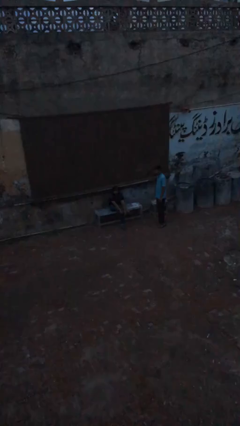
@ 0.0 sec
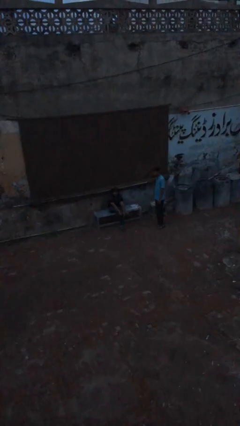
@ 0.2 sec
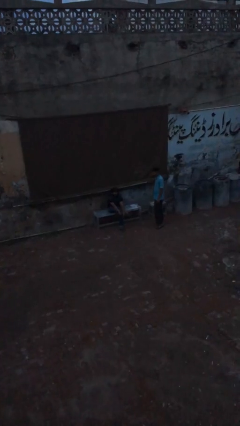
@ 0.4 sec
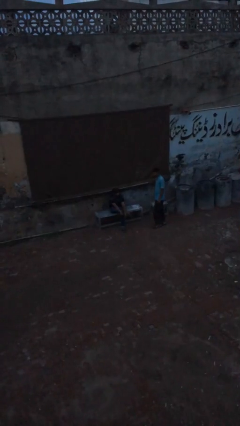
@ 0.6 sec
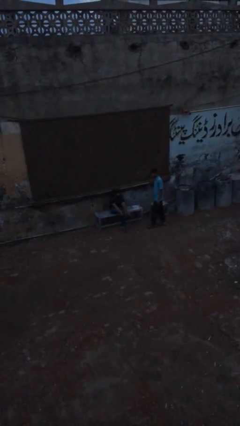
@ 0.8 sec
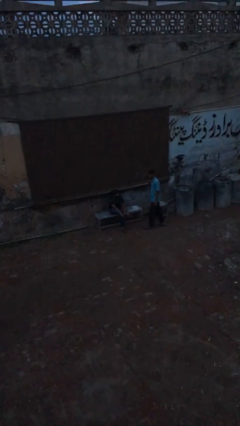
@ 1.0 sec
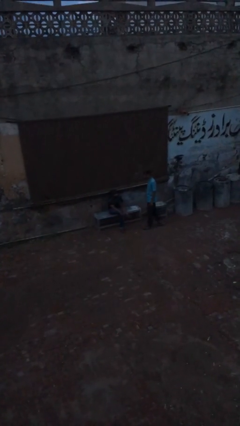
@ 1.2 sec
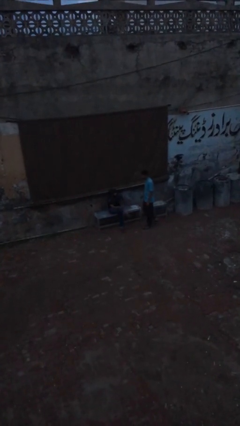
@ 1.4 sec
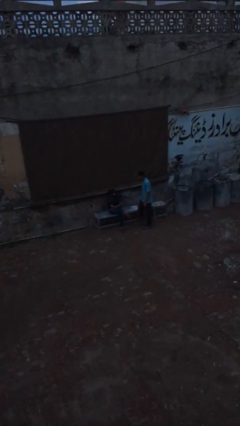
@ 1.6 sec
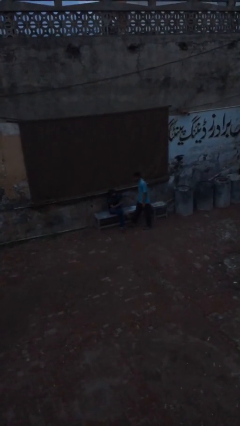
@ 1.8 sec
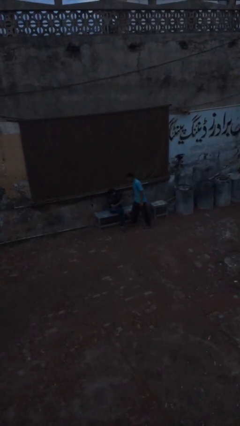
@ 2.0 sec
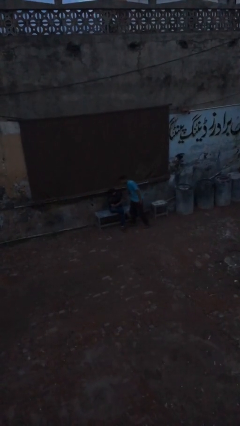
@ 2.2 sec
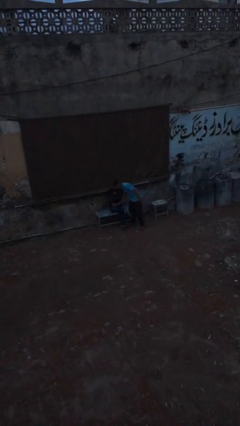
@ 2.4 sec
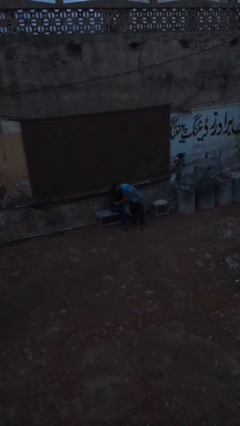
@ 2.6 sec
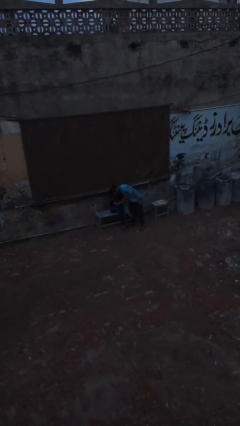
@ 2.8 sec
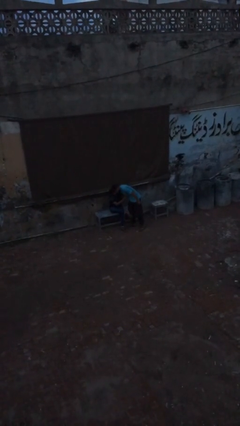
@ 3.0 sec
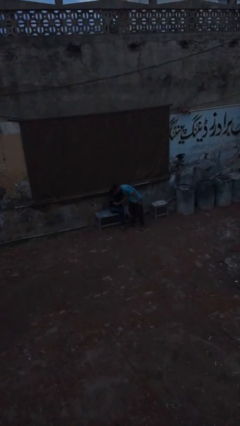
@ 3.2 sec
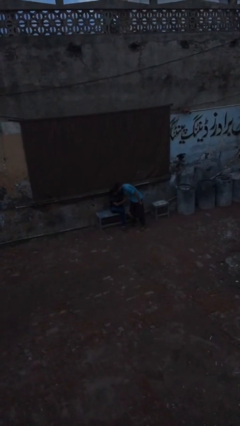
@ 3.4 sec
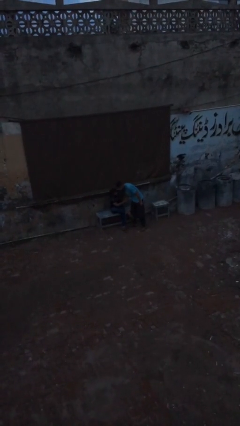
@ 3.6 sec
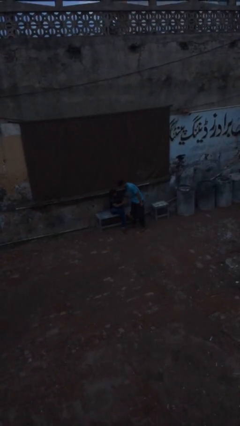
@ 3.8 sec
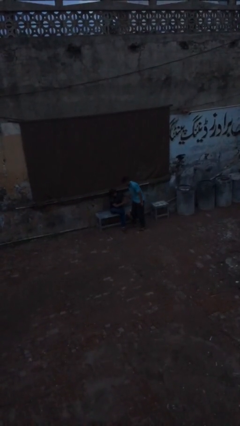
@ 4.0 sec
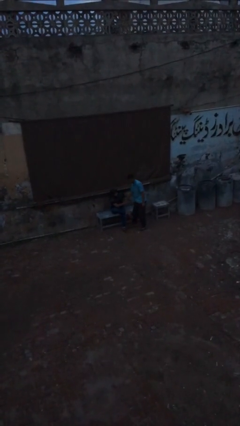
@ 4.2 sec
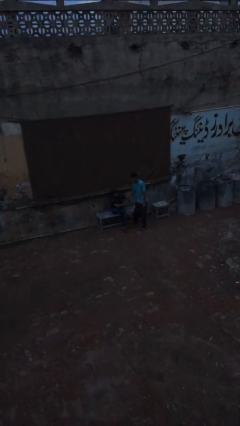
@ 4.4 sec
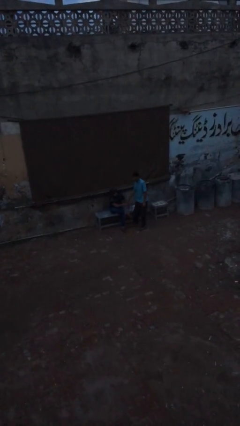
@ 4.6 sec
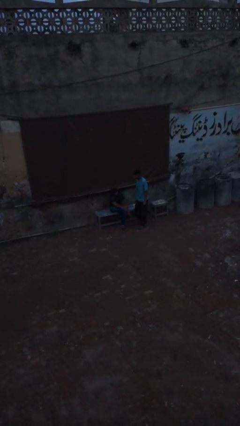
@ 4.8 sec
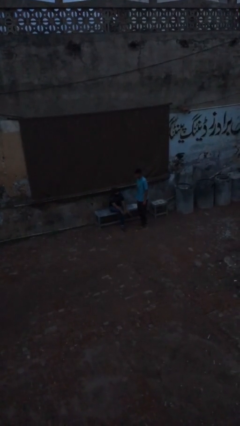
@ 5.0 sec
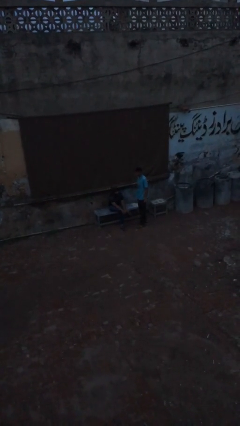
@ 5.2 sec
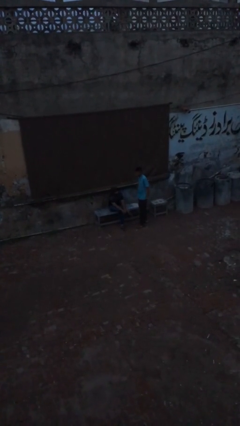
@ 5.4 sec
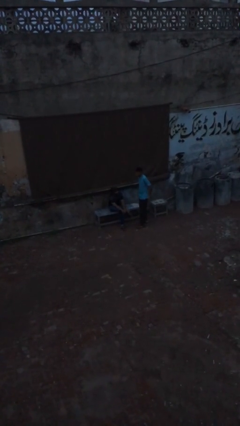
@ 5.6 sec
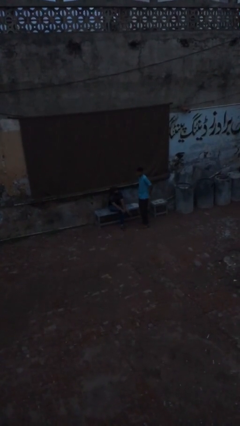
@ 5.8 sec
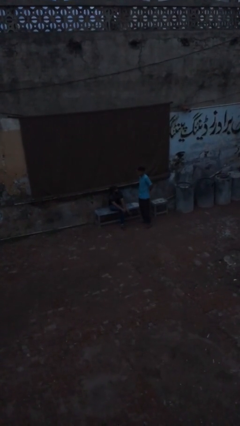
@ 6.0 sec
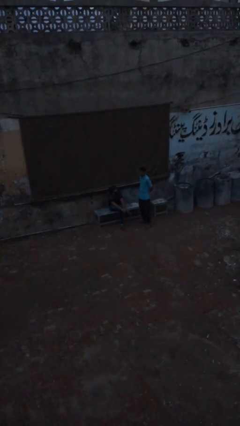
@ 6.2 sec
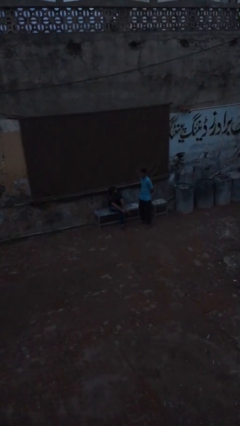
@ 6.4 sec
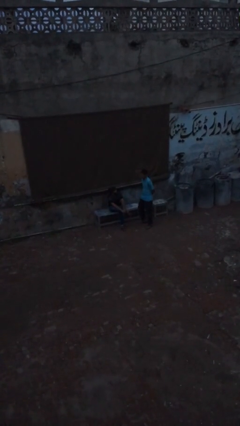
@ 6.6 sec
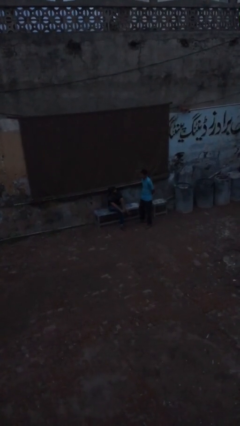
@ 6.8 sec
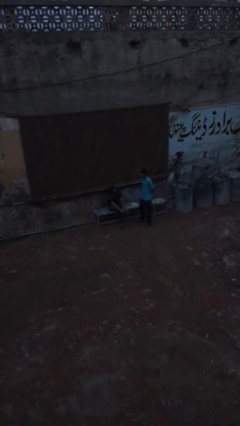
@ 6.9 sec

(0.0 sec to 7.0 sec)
person embraces person

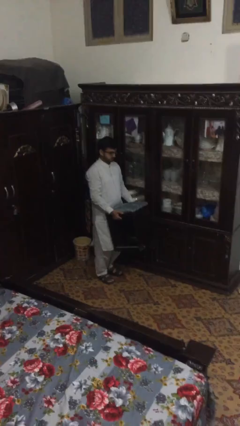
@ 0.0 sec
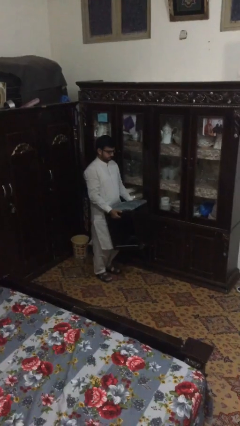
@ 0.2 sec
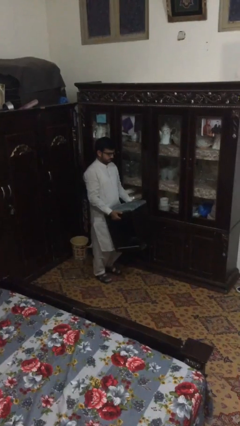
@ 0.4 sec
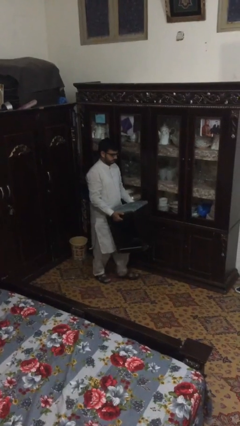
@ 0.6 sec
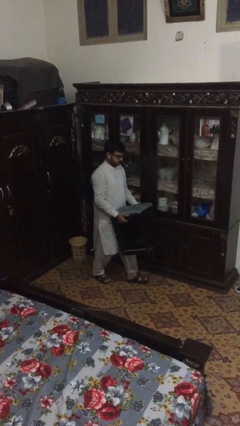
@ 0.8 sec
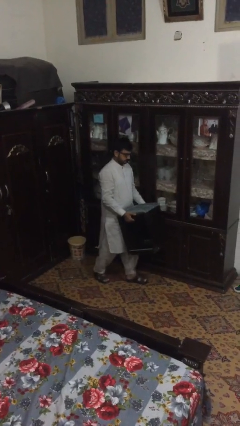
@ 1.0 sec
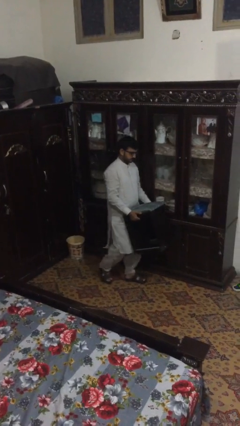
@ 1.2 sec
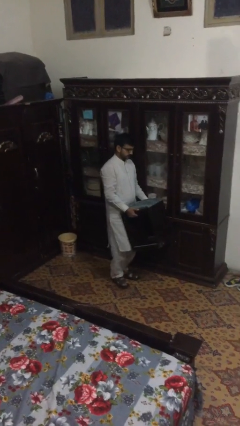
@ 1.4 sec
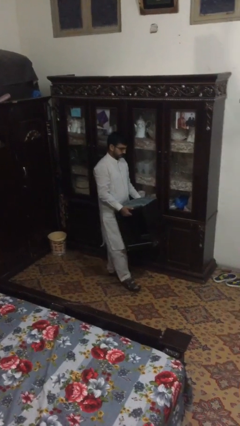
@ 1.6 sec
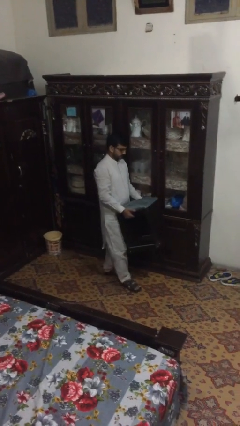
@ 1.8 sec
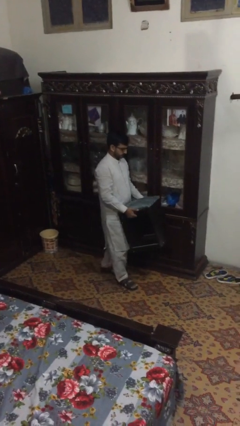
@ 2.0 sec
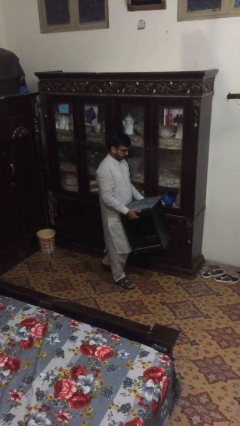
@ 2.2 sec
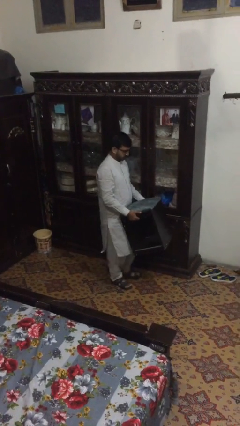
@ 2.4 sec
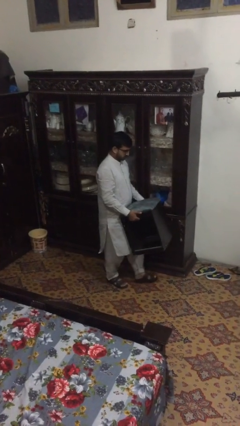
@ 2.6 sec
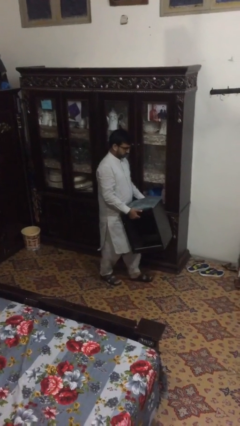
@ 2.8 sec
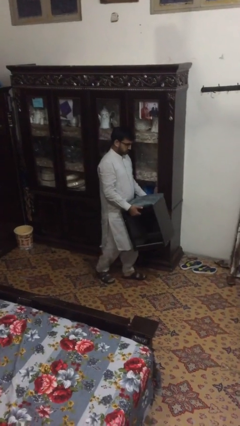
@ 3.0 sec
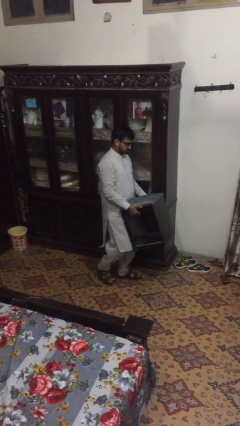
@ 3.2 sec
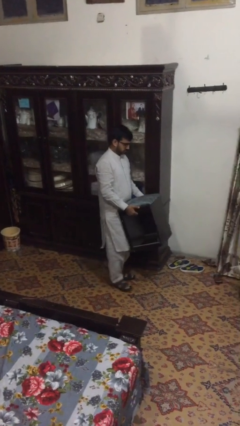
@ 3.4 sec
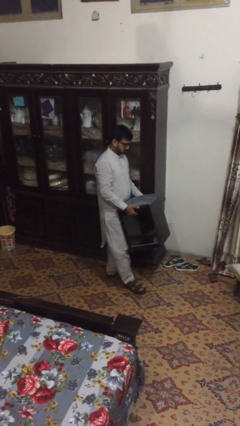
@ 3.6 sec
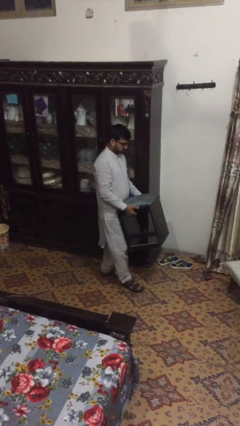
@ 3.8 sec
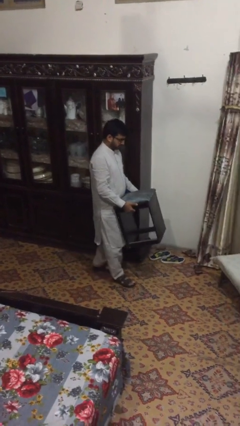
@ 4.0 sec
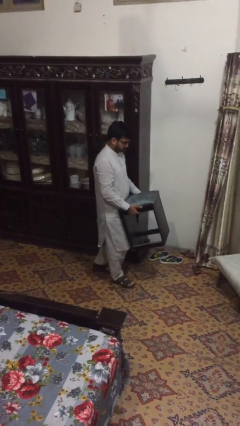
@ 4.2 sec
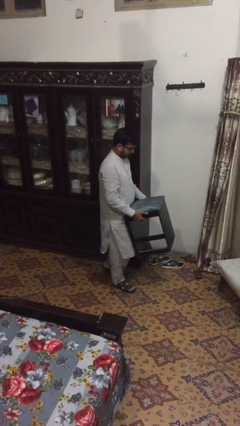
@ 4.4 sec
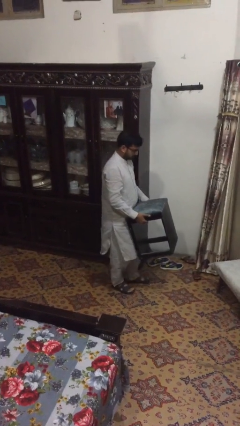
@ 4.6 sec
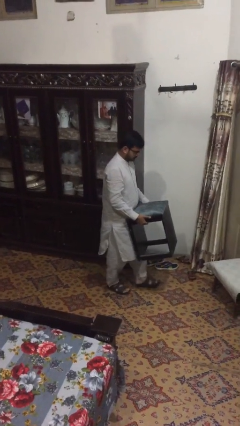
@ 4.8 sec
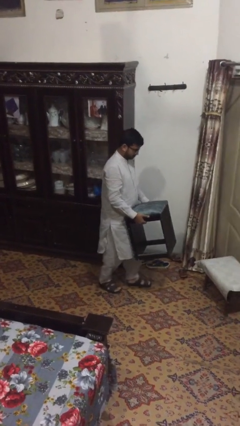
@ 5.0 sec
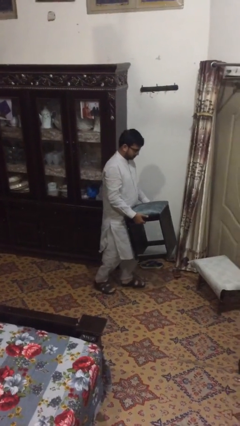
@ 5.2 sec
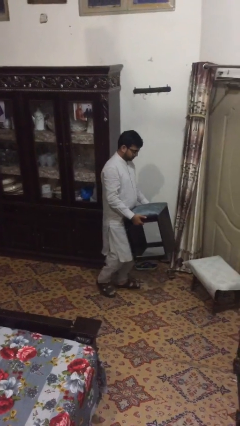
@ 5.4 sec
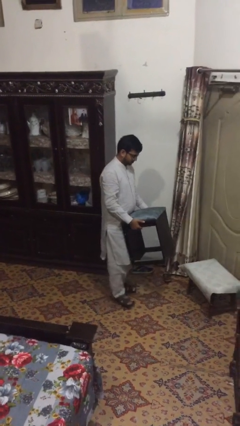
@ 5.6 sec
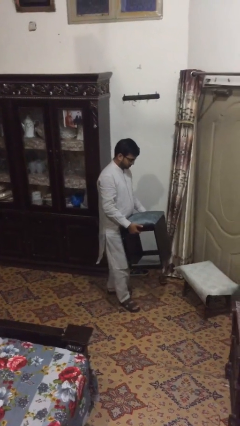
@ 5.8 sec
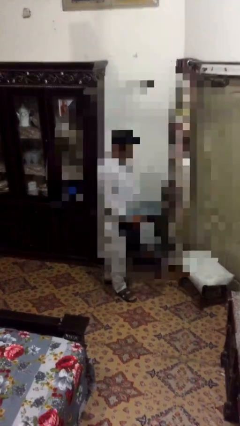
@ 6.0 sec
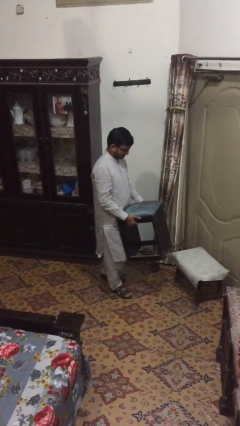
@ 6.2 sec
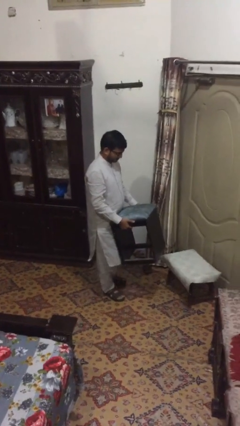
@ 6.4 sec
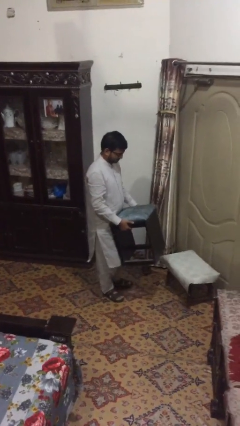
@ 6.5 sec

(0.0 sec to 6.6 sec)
person carries heavy object

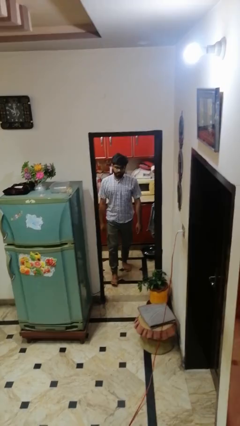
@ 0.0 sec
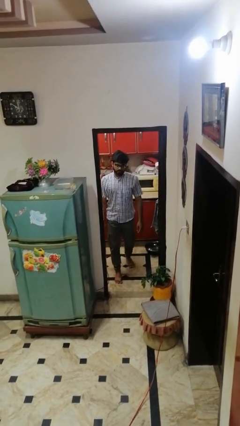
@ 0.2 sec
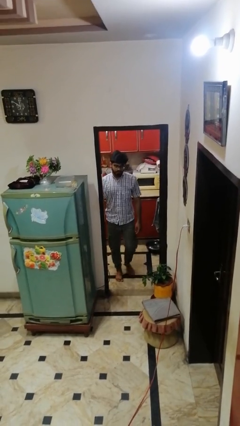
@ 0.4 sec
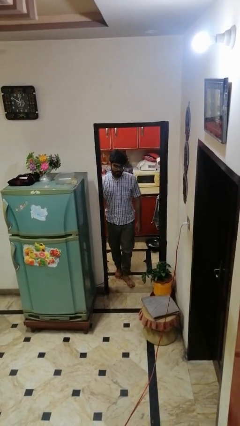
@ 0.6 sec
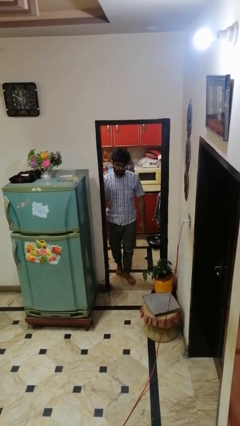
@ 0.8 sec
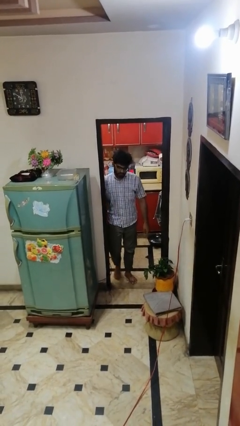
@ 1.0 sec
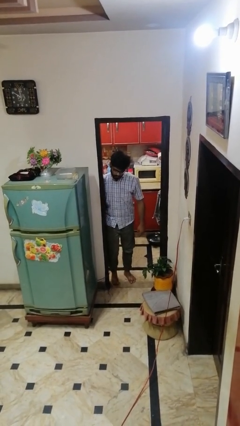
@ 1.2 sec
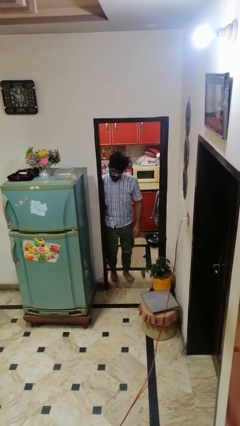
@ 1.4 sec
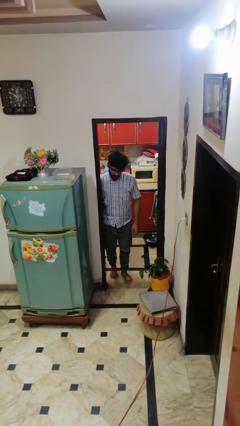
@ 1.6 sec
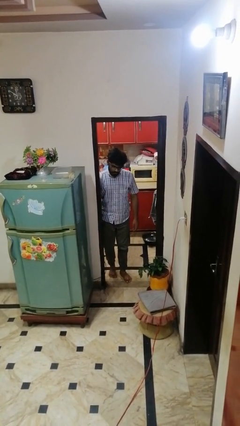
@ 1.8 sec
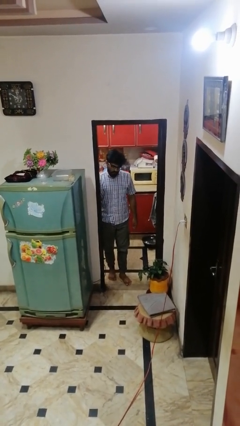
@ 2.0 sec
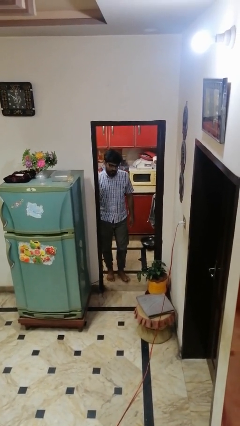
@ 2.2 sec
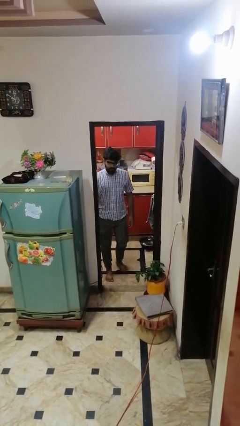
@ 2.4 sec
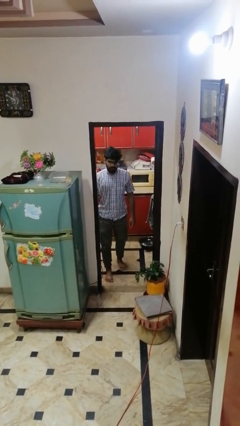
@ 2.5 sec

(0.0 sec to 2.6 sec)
person bumps into wall

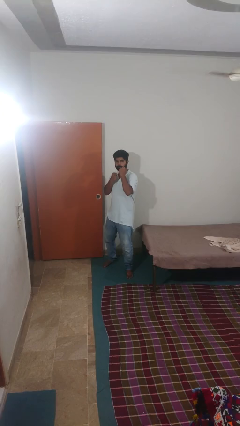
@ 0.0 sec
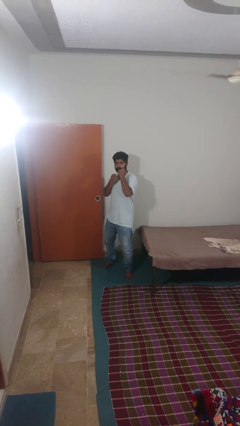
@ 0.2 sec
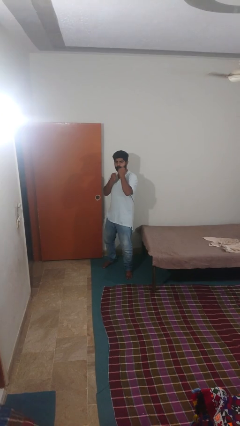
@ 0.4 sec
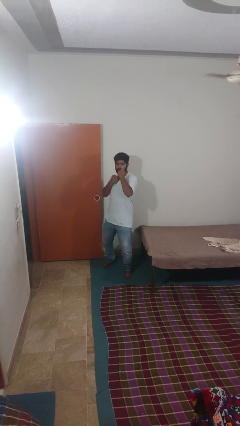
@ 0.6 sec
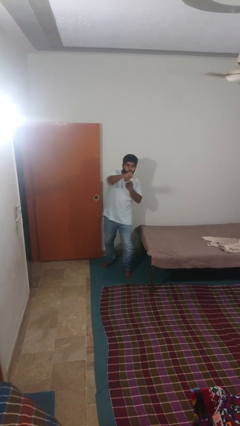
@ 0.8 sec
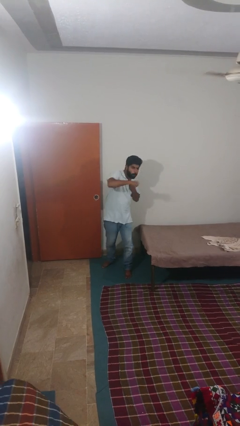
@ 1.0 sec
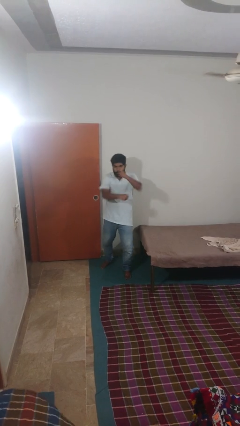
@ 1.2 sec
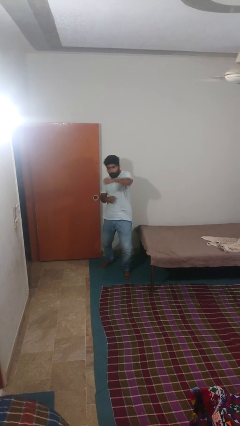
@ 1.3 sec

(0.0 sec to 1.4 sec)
person punches
